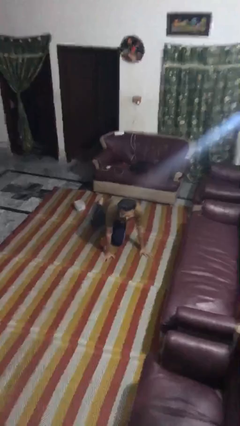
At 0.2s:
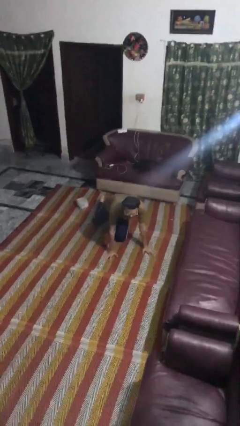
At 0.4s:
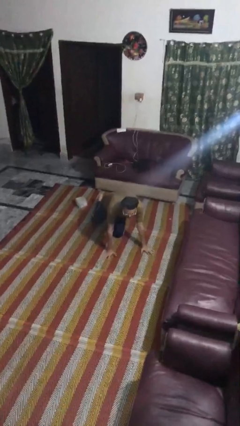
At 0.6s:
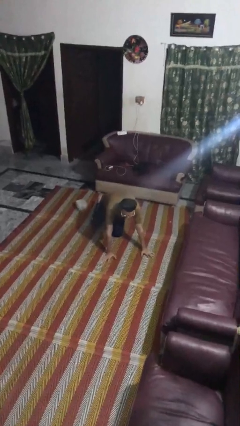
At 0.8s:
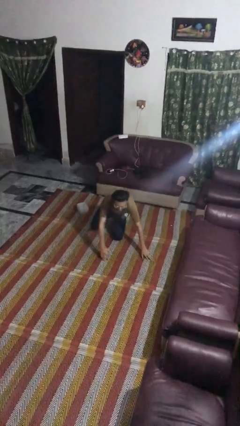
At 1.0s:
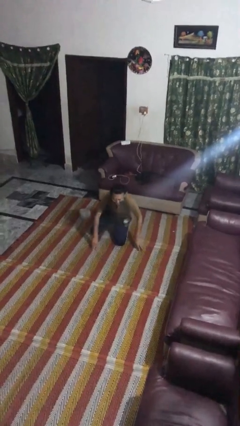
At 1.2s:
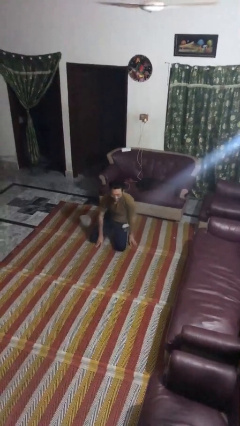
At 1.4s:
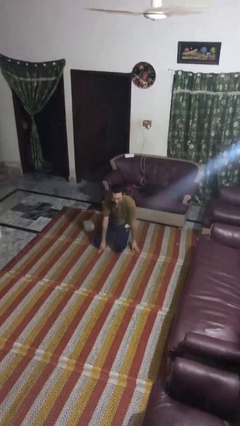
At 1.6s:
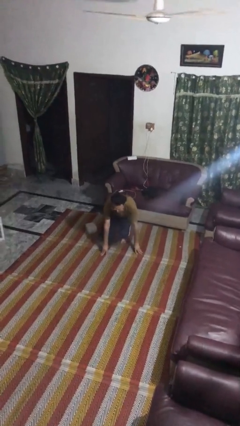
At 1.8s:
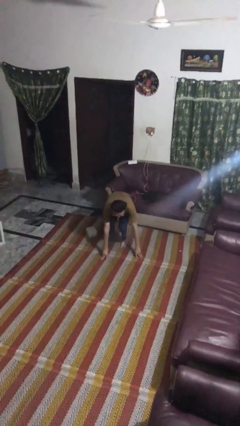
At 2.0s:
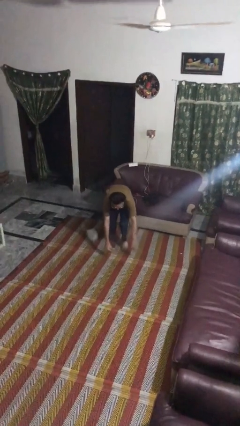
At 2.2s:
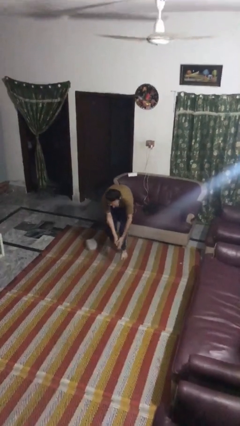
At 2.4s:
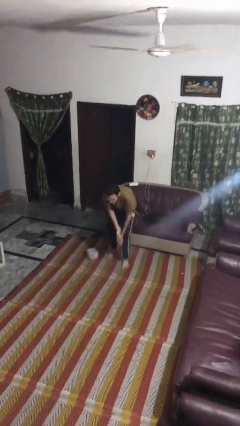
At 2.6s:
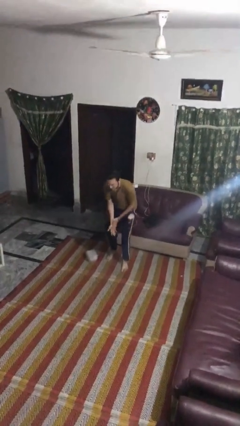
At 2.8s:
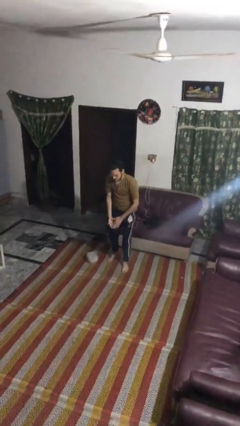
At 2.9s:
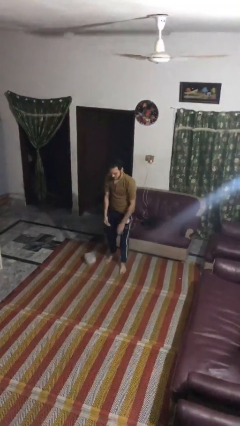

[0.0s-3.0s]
person stands up from floor

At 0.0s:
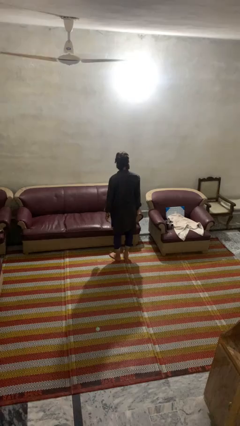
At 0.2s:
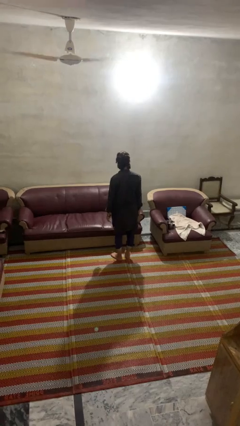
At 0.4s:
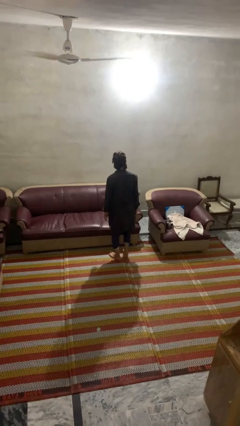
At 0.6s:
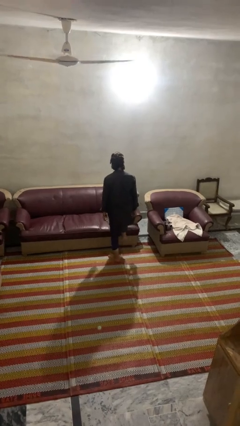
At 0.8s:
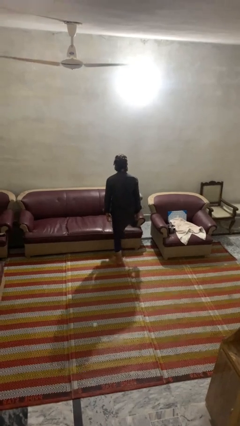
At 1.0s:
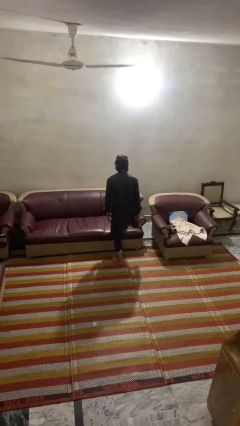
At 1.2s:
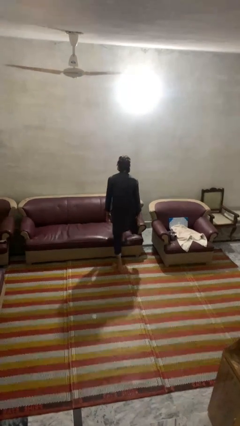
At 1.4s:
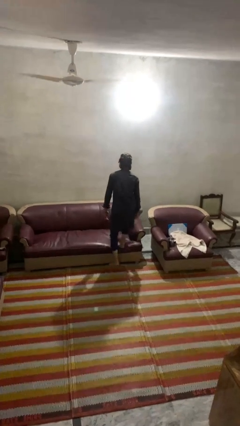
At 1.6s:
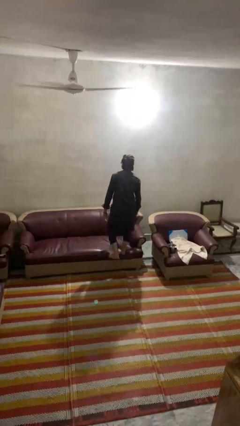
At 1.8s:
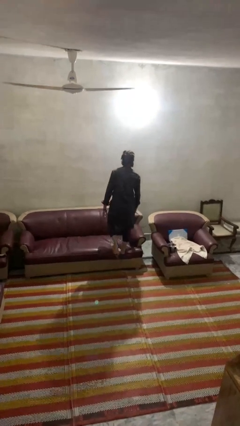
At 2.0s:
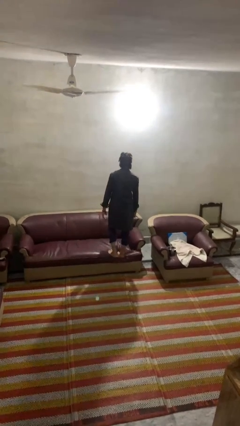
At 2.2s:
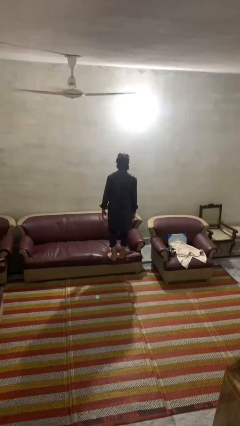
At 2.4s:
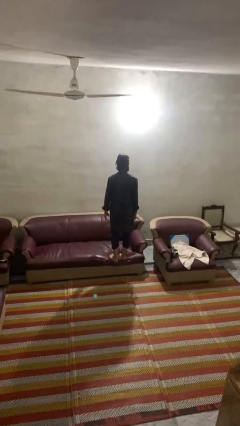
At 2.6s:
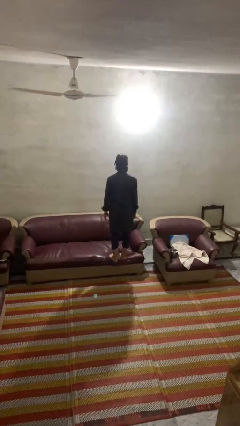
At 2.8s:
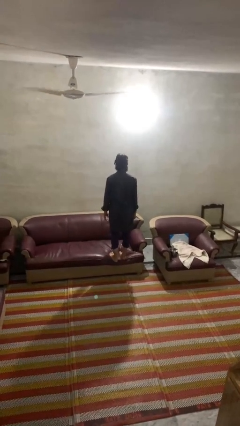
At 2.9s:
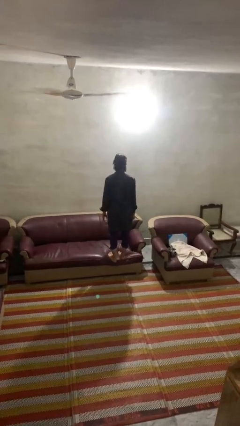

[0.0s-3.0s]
person climbs on couch

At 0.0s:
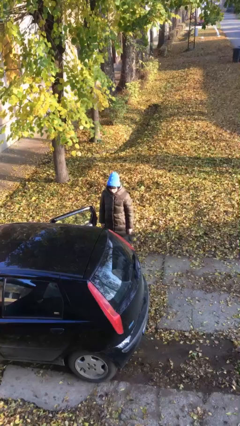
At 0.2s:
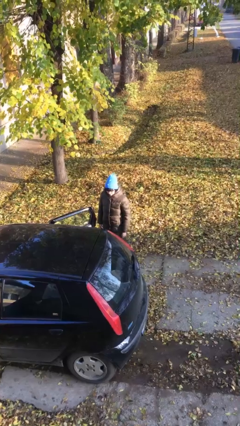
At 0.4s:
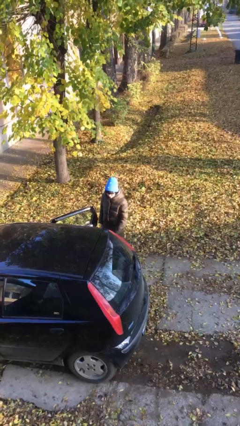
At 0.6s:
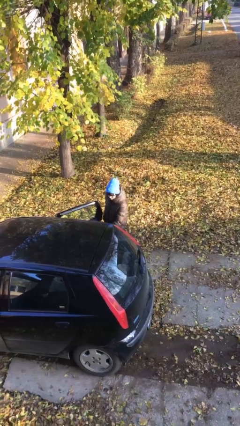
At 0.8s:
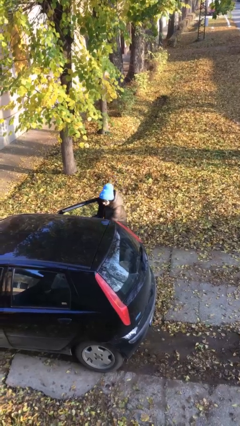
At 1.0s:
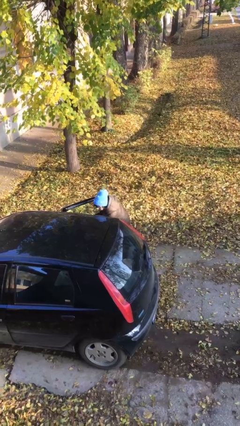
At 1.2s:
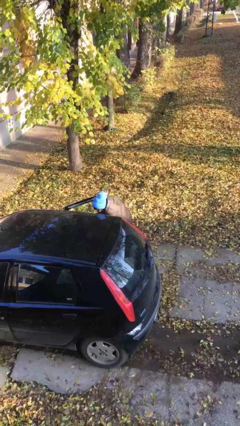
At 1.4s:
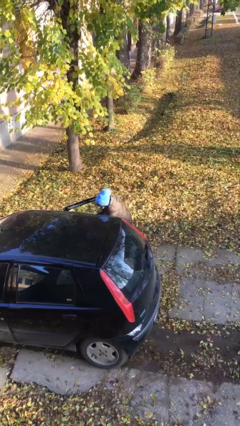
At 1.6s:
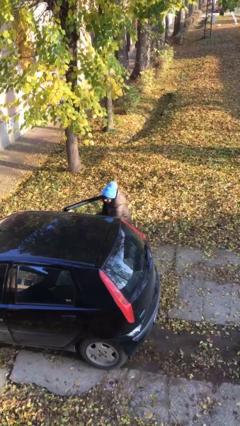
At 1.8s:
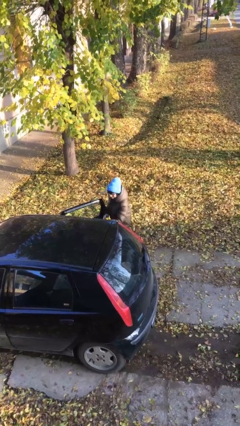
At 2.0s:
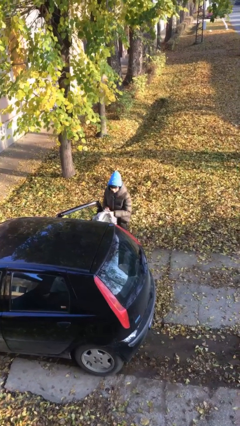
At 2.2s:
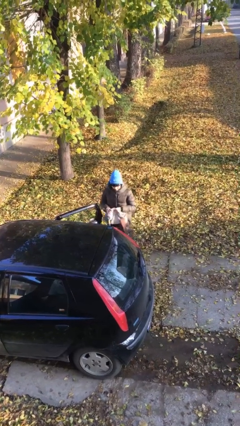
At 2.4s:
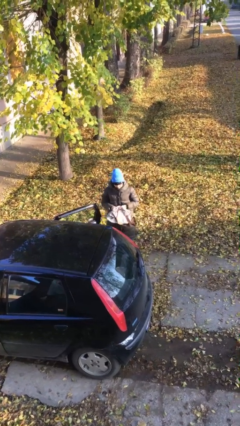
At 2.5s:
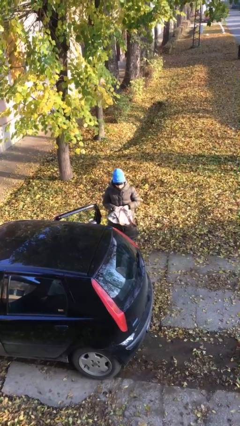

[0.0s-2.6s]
person unloads car

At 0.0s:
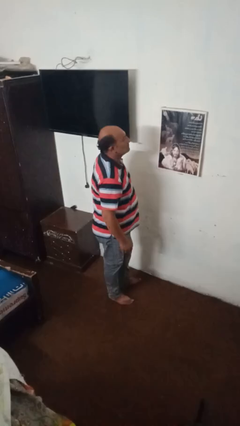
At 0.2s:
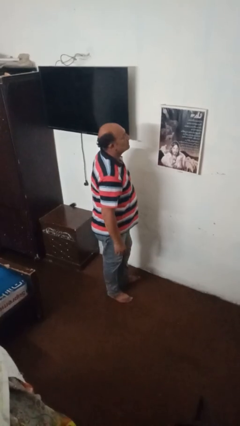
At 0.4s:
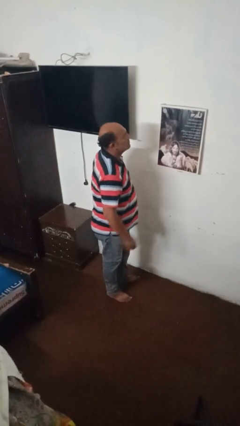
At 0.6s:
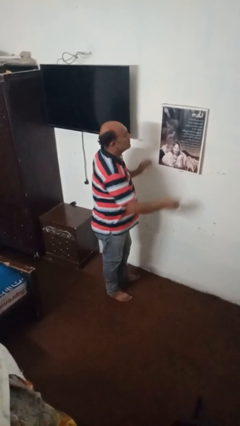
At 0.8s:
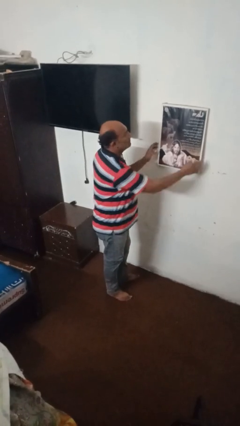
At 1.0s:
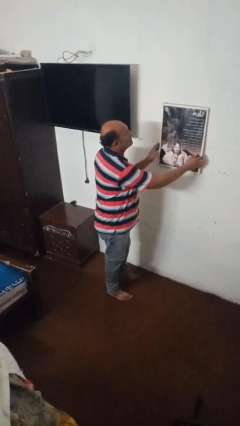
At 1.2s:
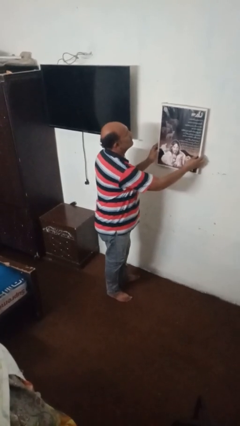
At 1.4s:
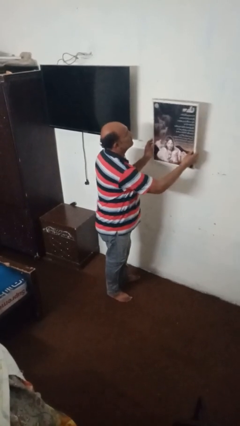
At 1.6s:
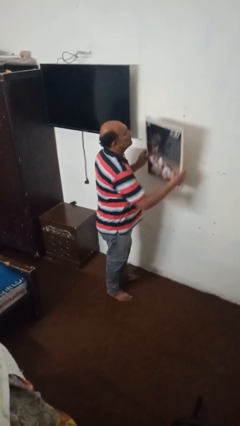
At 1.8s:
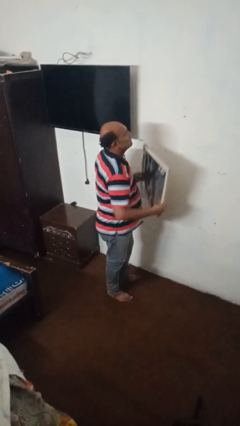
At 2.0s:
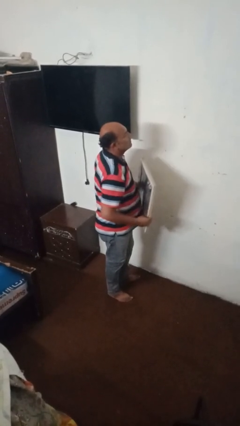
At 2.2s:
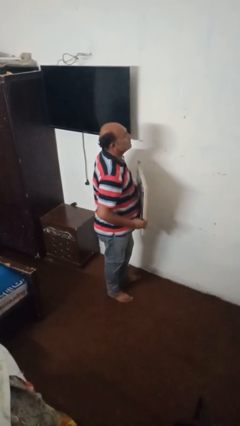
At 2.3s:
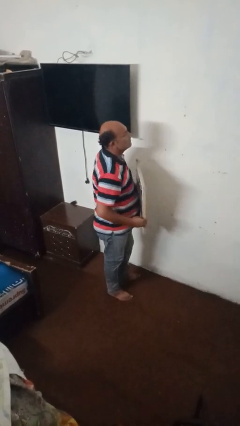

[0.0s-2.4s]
person takes down picture frame

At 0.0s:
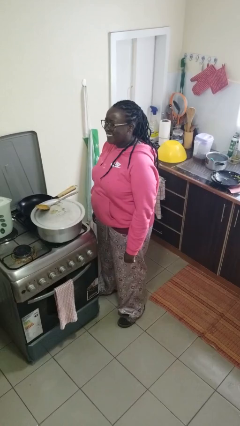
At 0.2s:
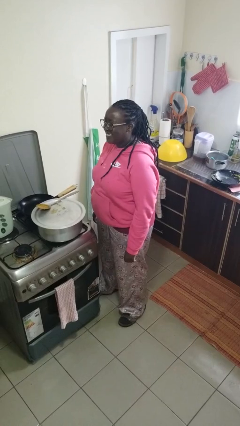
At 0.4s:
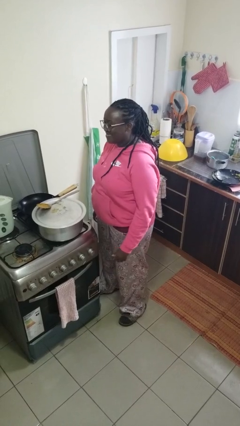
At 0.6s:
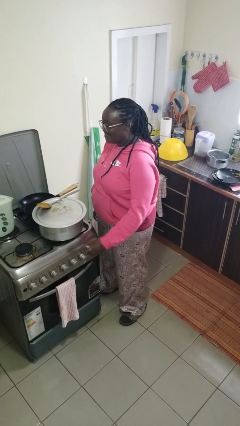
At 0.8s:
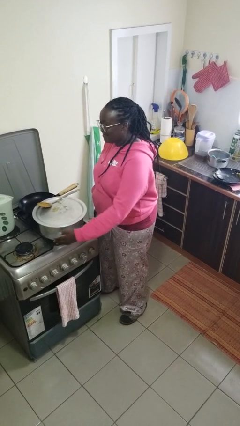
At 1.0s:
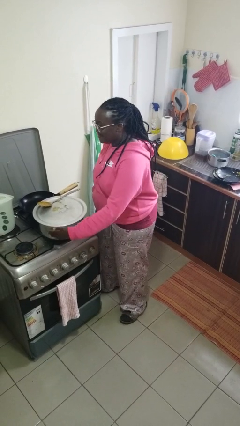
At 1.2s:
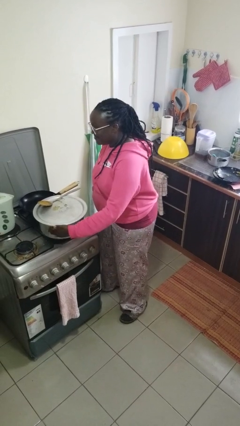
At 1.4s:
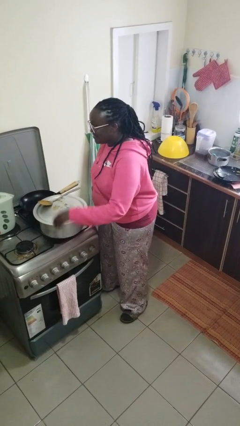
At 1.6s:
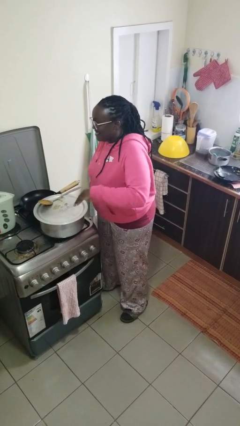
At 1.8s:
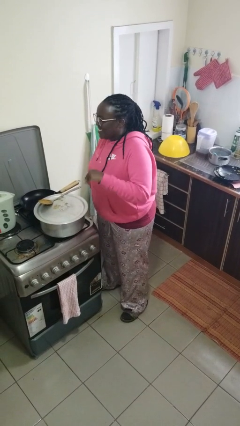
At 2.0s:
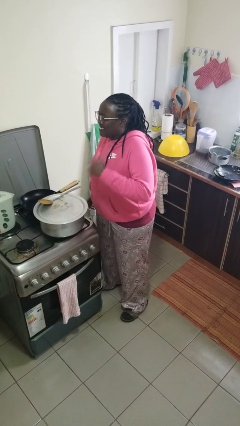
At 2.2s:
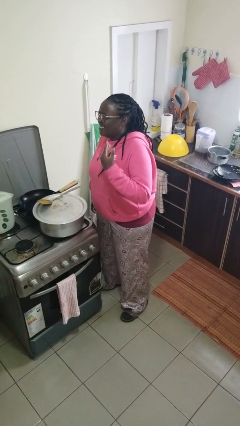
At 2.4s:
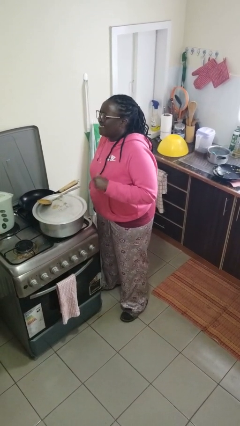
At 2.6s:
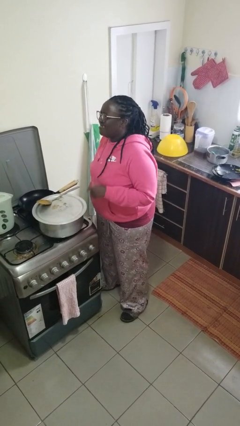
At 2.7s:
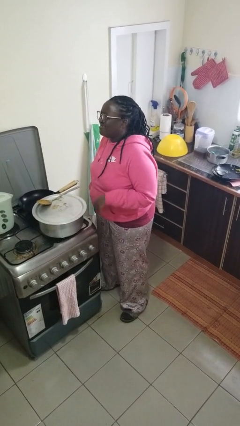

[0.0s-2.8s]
person burns hand

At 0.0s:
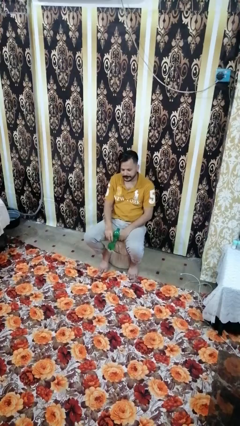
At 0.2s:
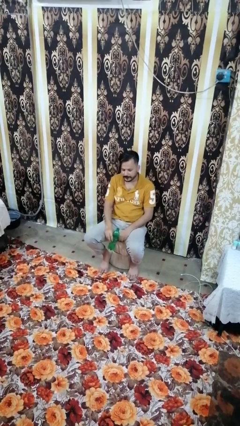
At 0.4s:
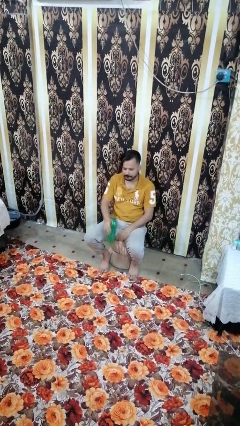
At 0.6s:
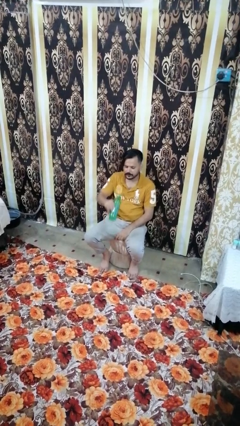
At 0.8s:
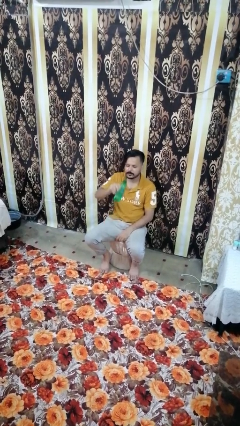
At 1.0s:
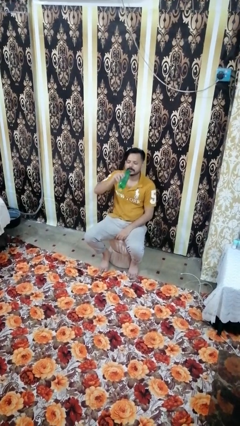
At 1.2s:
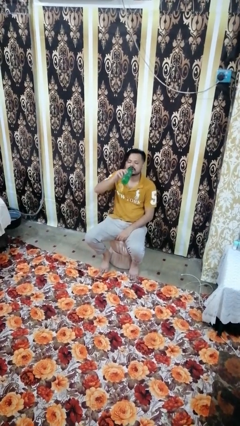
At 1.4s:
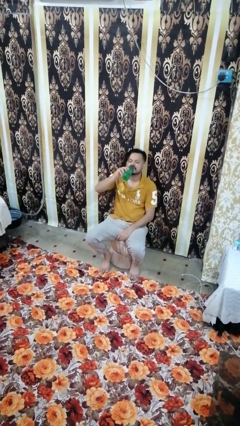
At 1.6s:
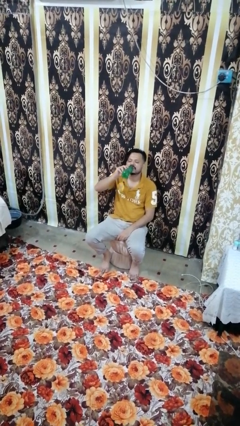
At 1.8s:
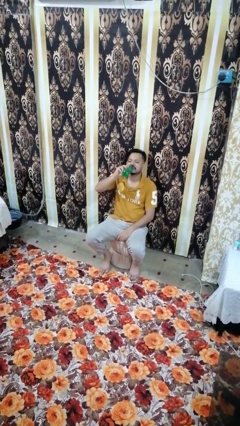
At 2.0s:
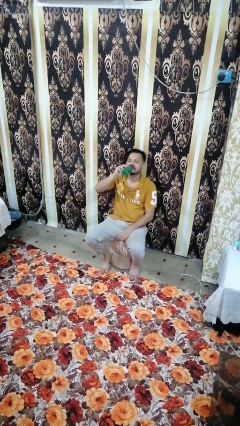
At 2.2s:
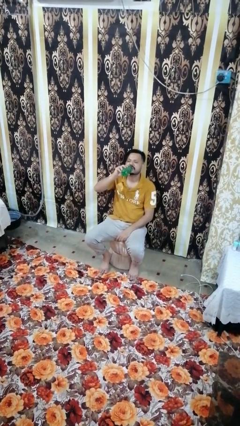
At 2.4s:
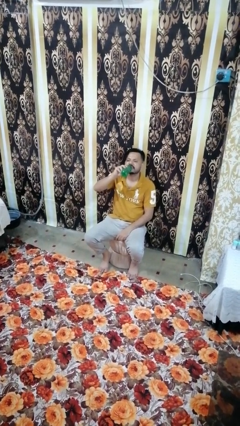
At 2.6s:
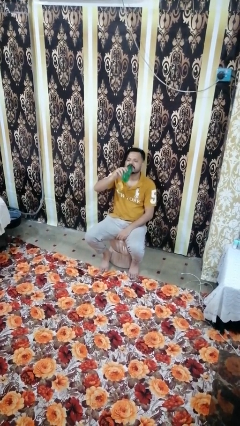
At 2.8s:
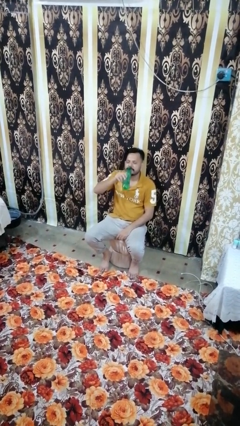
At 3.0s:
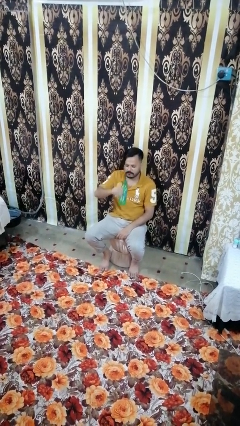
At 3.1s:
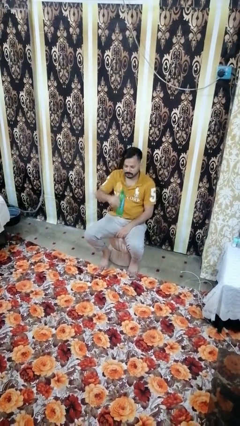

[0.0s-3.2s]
person drinks from bottle

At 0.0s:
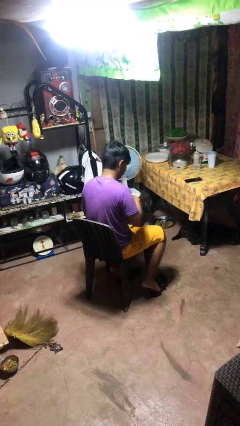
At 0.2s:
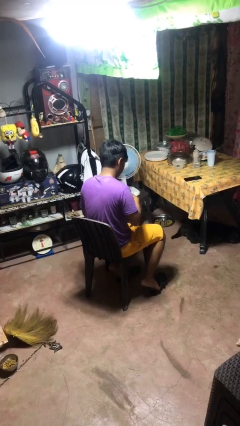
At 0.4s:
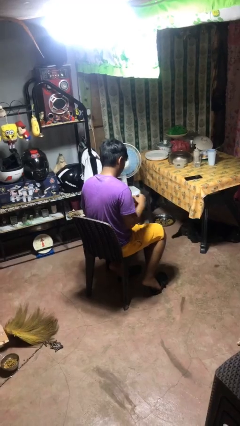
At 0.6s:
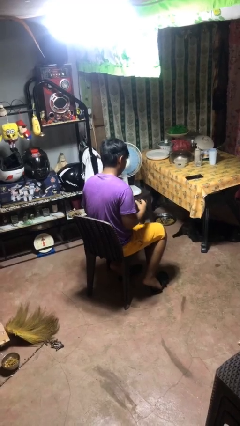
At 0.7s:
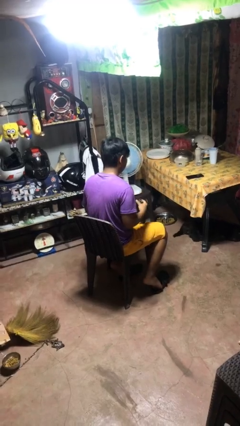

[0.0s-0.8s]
person puts object into purse
